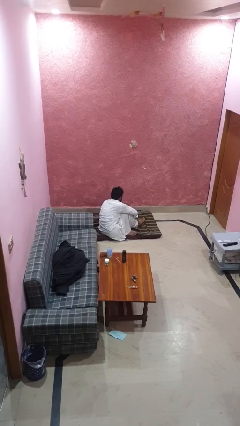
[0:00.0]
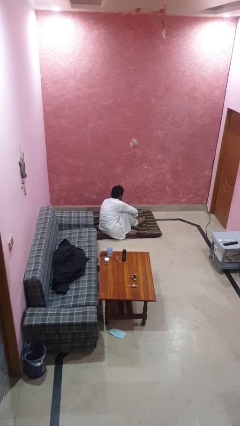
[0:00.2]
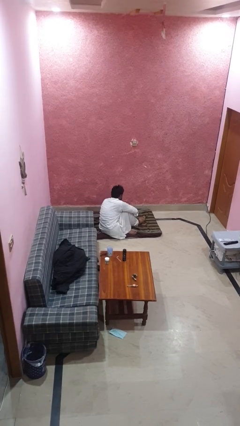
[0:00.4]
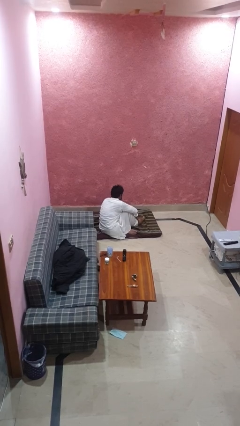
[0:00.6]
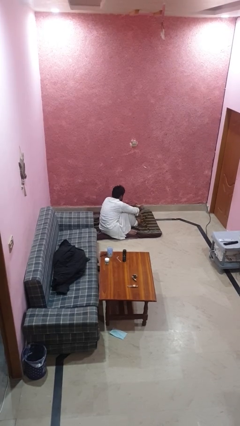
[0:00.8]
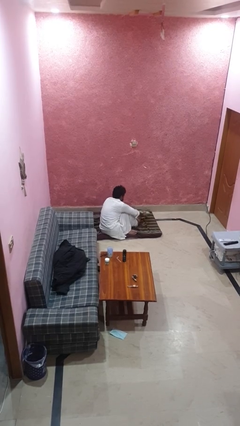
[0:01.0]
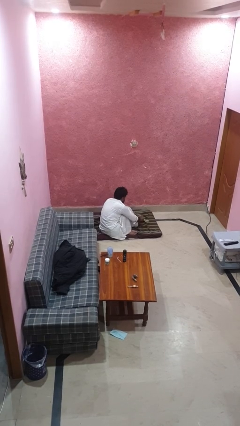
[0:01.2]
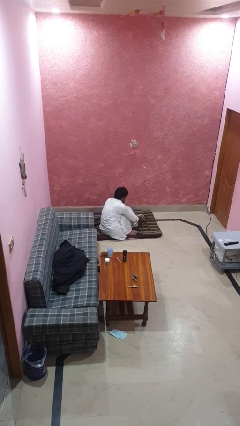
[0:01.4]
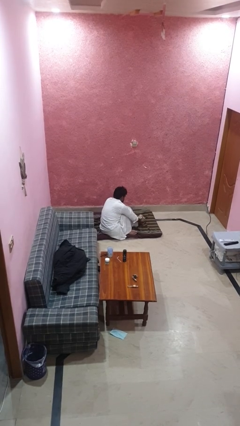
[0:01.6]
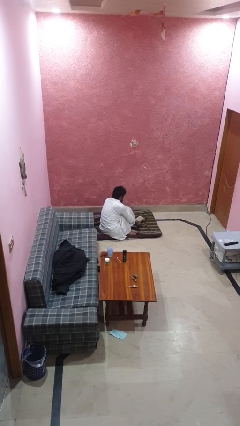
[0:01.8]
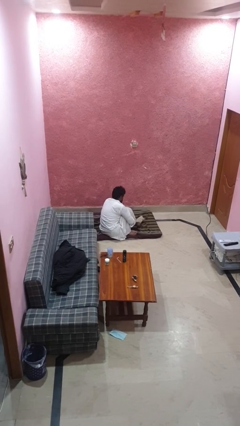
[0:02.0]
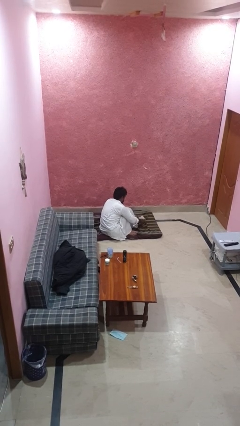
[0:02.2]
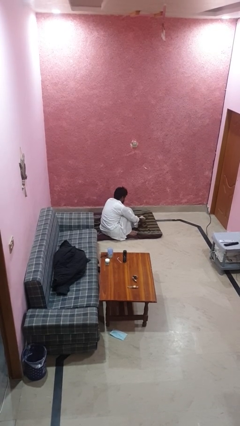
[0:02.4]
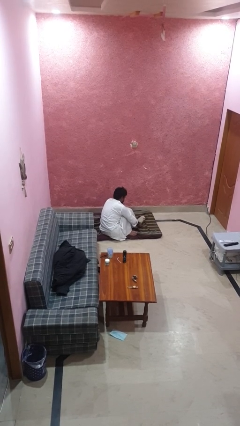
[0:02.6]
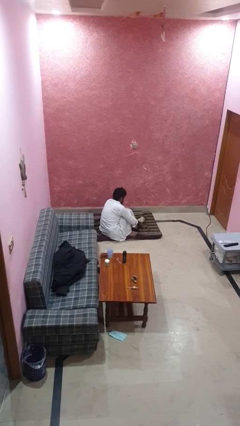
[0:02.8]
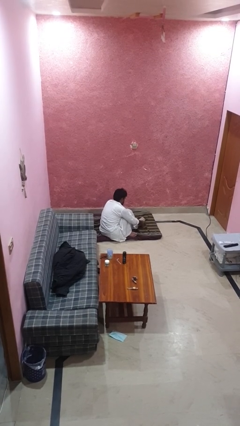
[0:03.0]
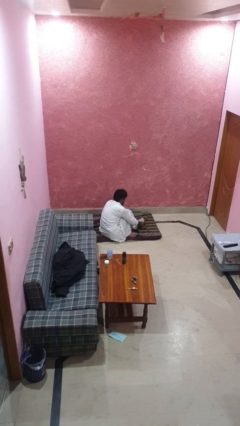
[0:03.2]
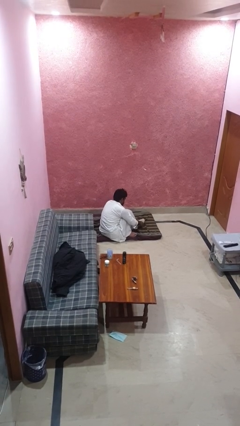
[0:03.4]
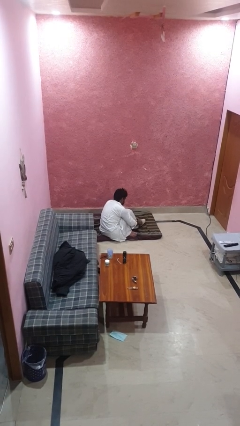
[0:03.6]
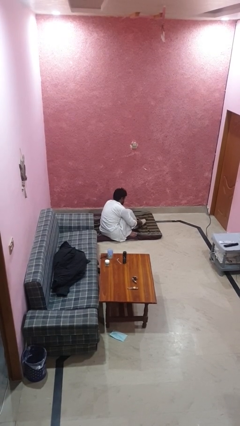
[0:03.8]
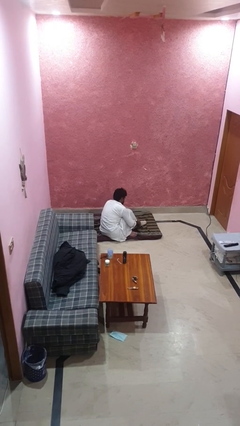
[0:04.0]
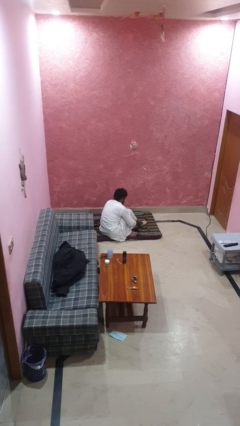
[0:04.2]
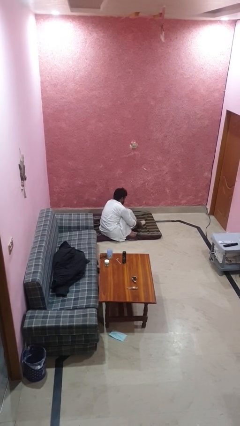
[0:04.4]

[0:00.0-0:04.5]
person puts on socks

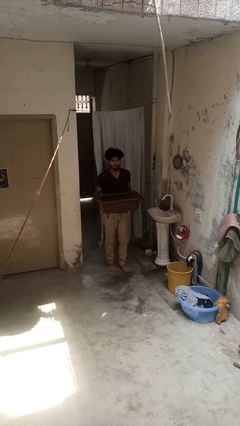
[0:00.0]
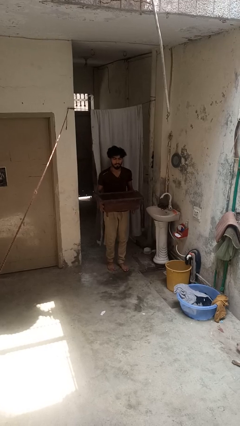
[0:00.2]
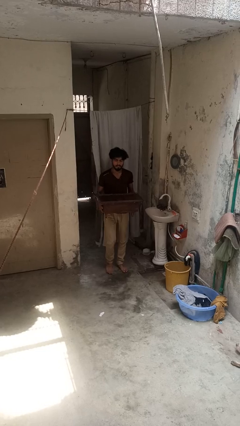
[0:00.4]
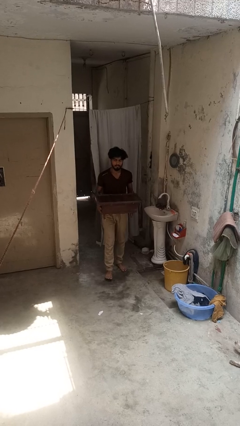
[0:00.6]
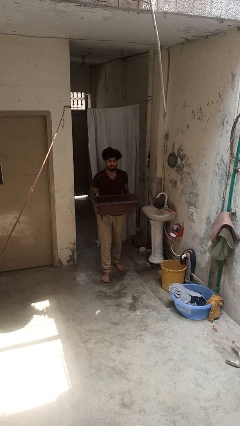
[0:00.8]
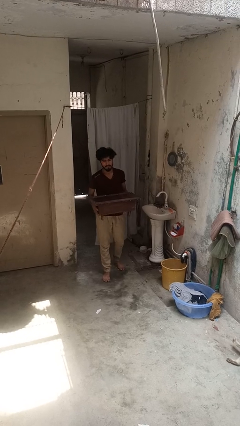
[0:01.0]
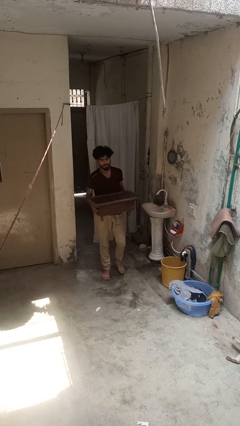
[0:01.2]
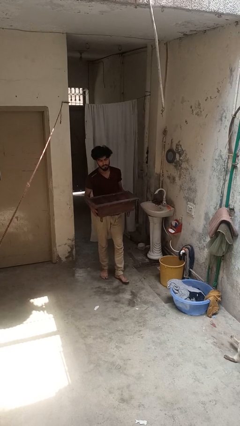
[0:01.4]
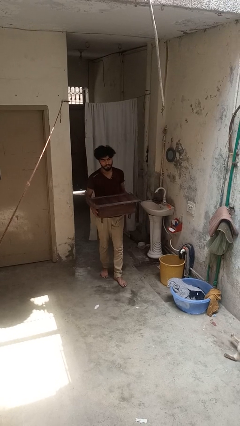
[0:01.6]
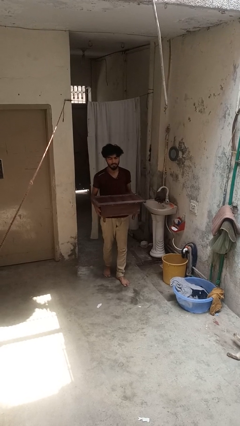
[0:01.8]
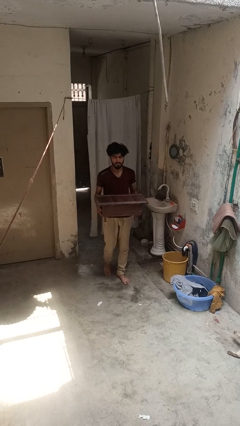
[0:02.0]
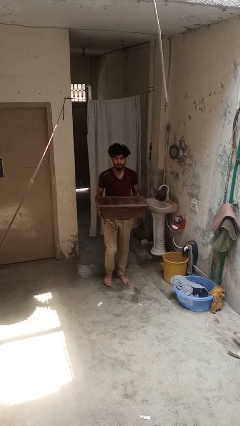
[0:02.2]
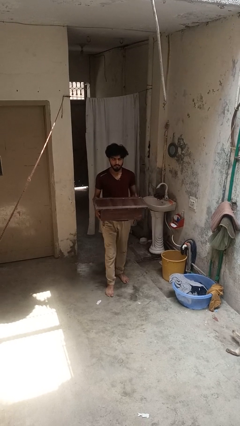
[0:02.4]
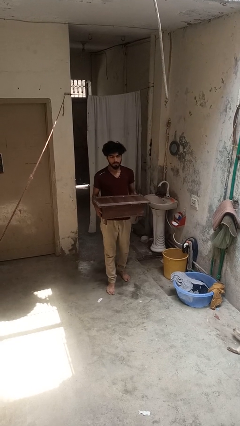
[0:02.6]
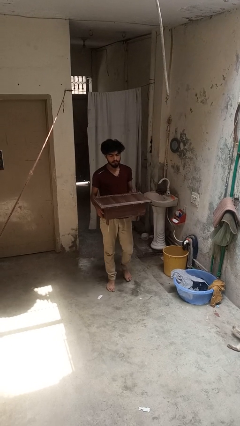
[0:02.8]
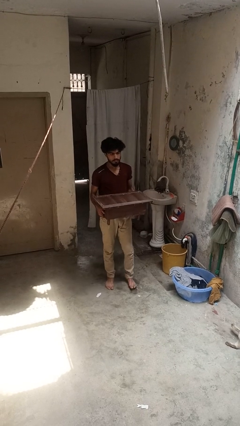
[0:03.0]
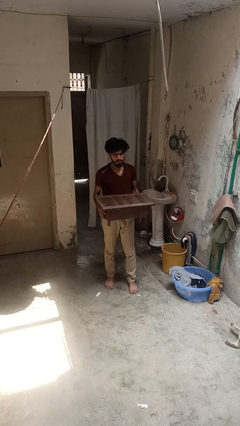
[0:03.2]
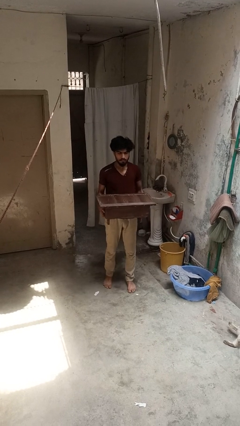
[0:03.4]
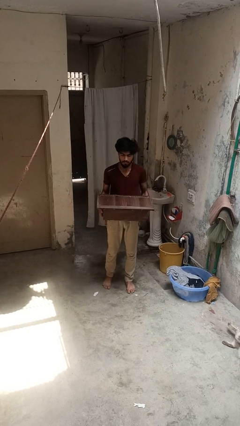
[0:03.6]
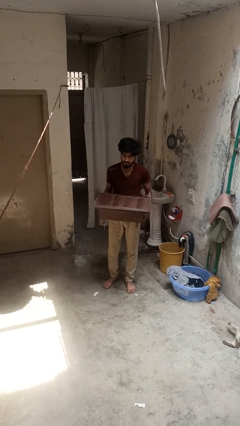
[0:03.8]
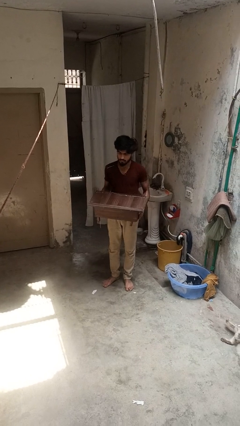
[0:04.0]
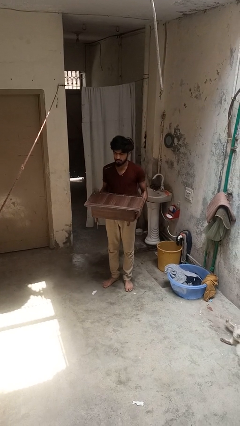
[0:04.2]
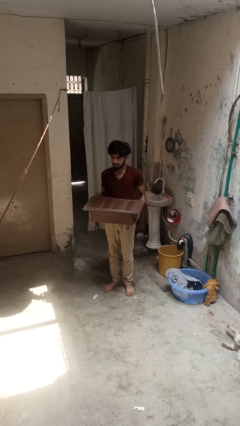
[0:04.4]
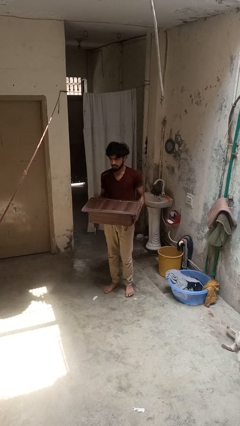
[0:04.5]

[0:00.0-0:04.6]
person carries furniture

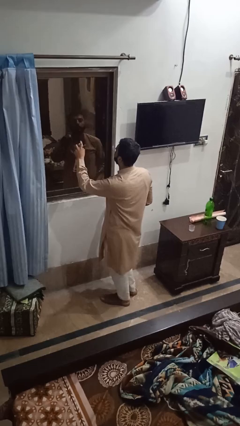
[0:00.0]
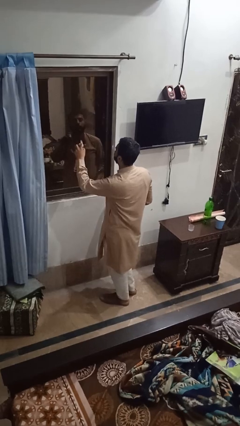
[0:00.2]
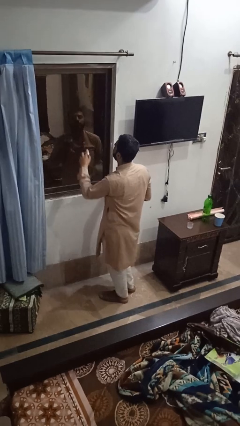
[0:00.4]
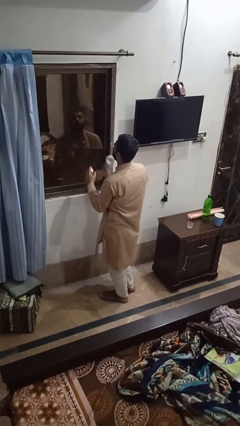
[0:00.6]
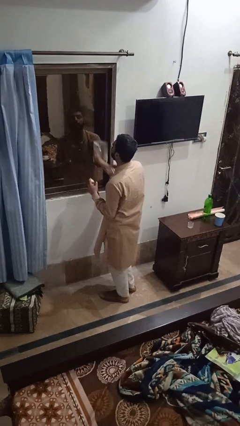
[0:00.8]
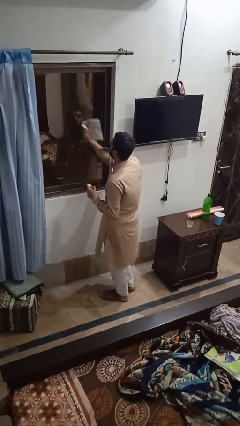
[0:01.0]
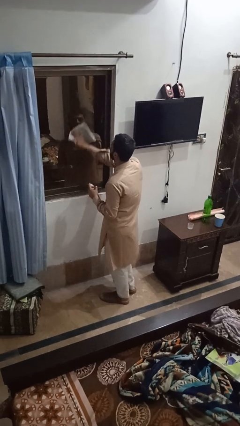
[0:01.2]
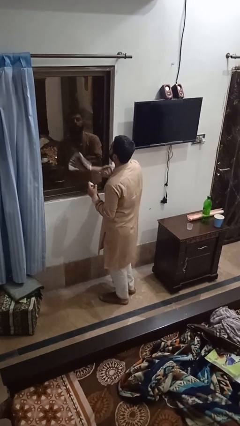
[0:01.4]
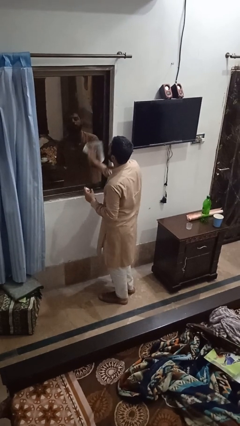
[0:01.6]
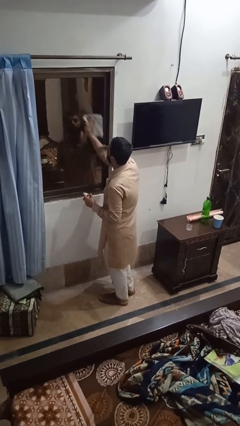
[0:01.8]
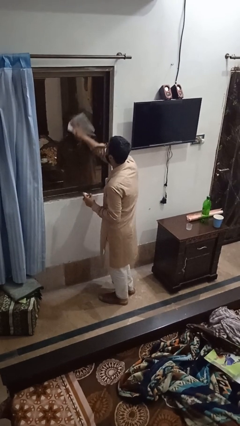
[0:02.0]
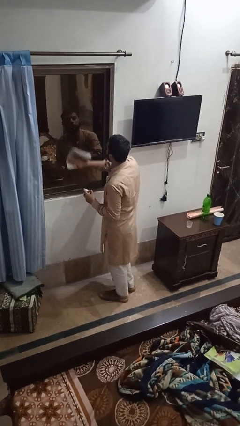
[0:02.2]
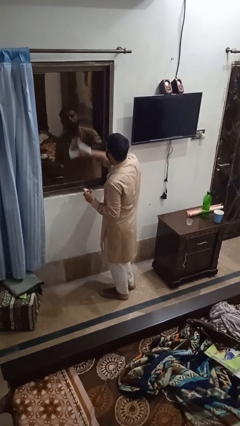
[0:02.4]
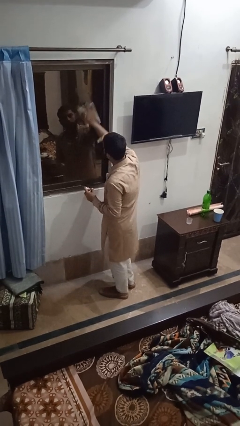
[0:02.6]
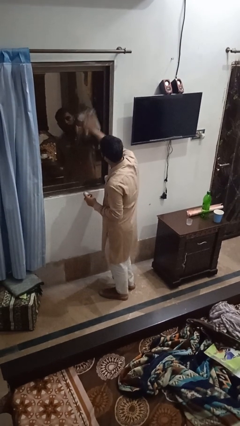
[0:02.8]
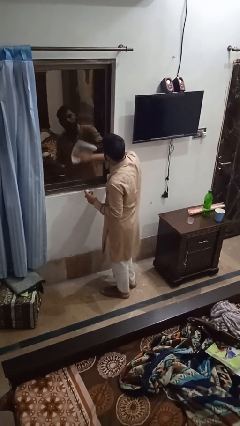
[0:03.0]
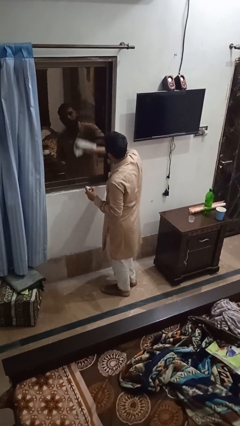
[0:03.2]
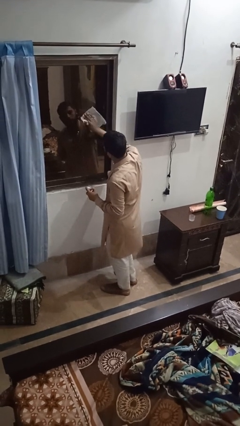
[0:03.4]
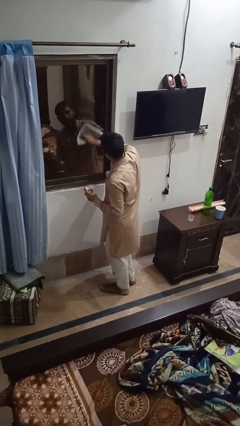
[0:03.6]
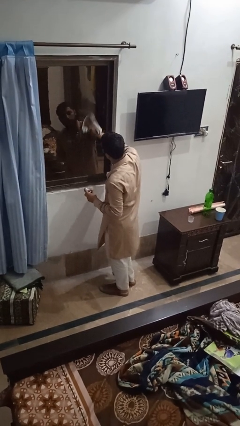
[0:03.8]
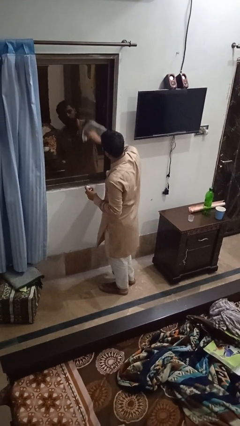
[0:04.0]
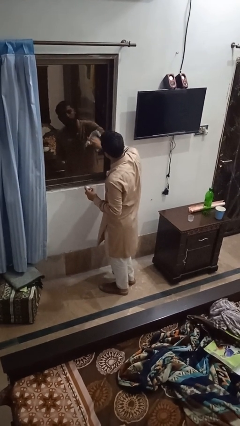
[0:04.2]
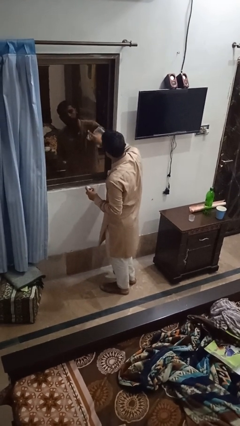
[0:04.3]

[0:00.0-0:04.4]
person washes window

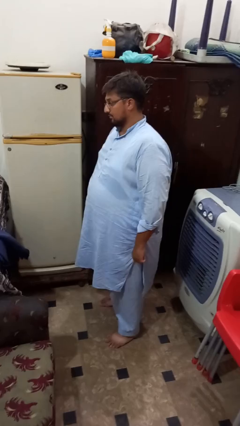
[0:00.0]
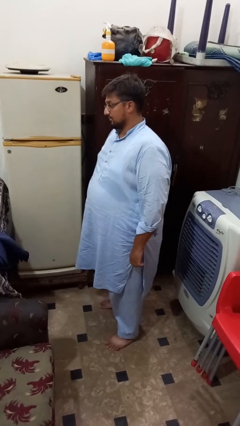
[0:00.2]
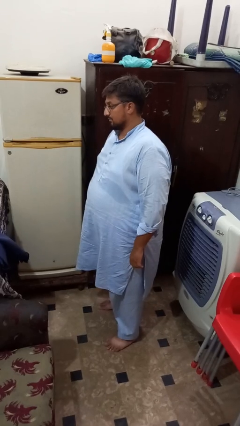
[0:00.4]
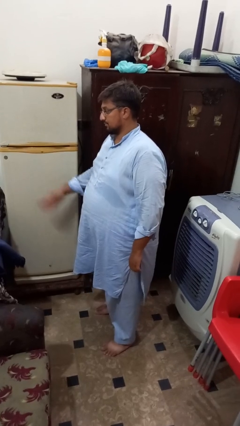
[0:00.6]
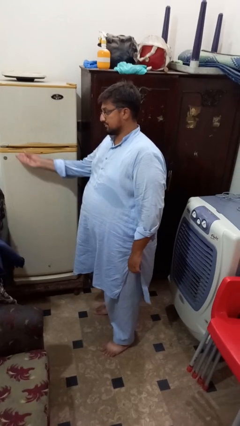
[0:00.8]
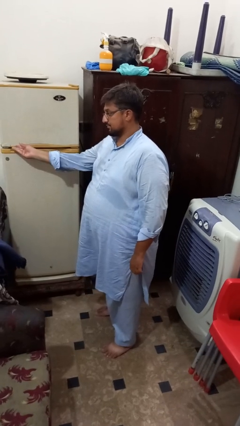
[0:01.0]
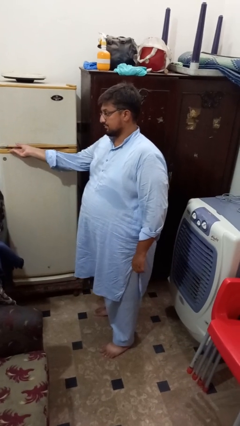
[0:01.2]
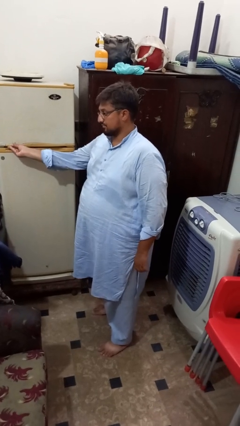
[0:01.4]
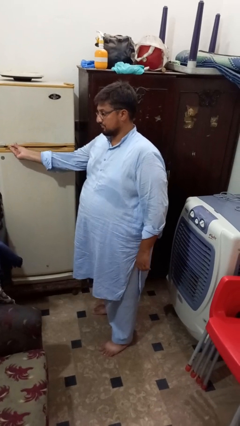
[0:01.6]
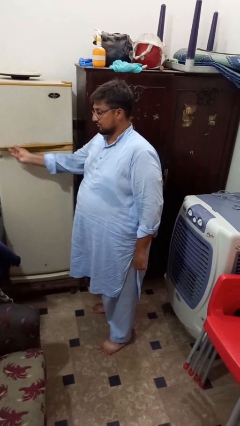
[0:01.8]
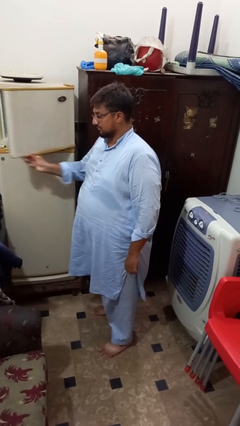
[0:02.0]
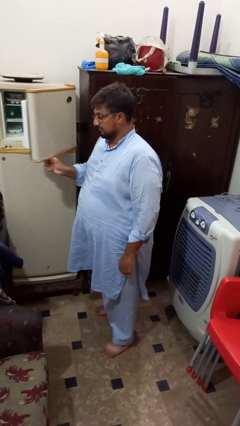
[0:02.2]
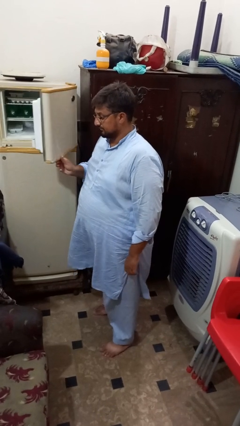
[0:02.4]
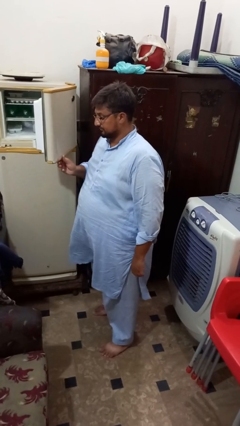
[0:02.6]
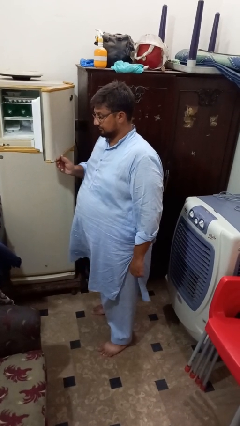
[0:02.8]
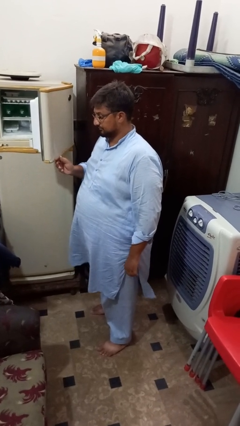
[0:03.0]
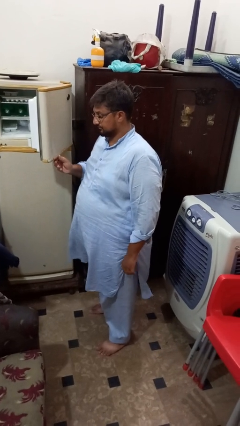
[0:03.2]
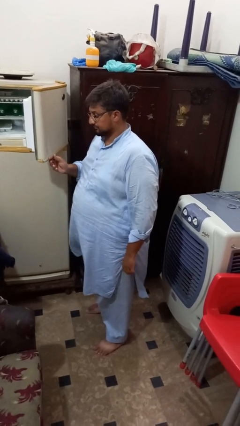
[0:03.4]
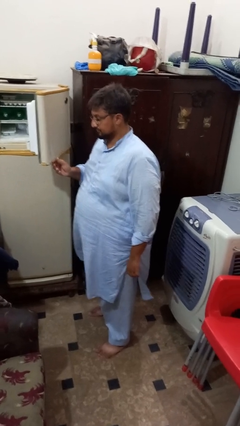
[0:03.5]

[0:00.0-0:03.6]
person opens refrigerator

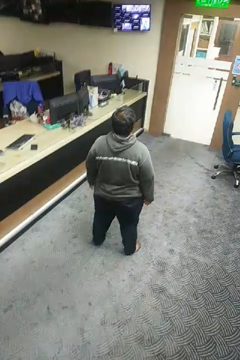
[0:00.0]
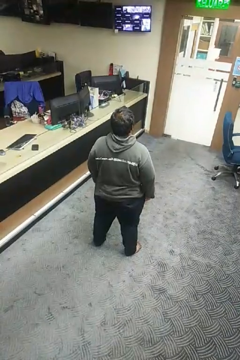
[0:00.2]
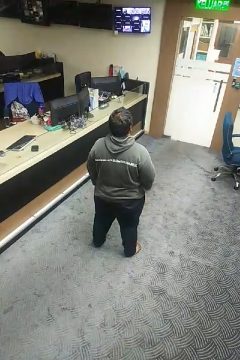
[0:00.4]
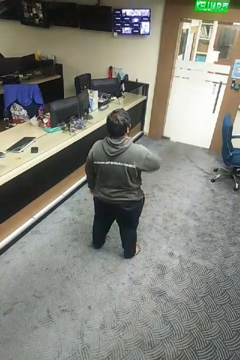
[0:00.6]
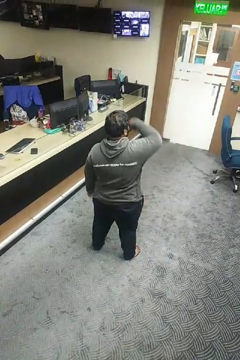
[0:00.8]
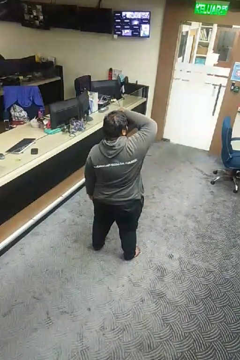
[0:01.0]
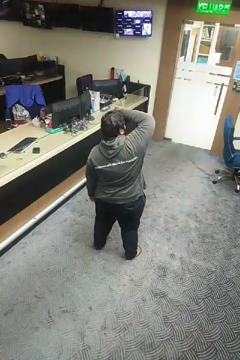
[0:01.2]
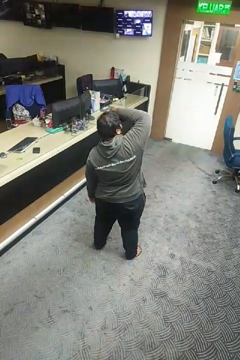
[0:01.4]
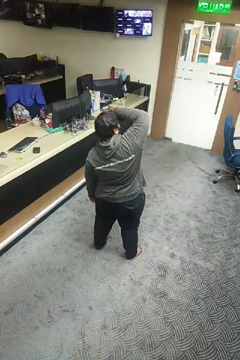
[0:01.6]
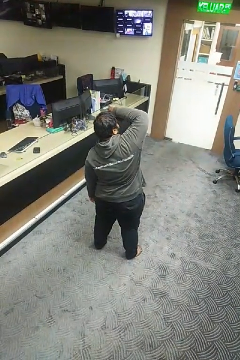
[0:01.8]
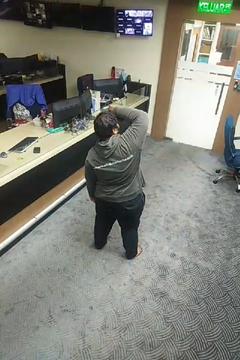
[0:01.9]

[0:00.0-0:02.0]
person shades eyes
